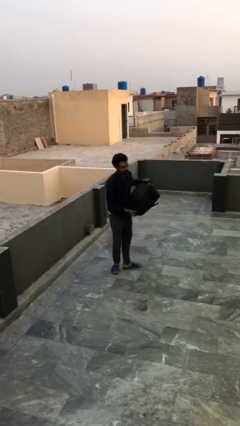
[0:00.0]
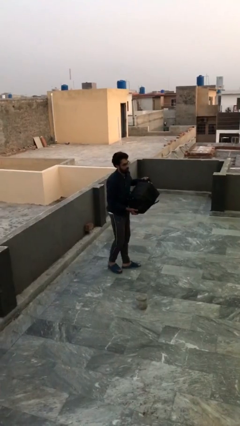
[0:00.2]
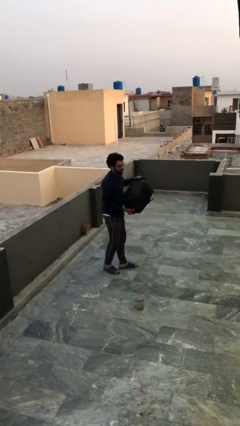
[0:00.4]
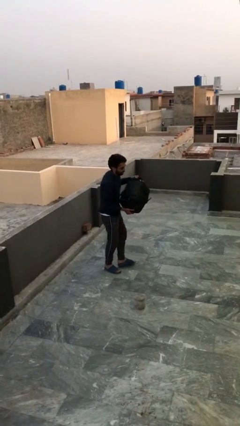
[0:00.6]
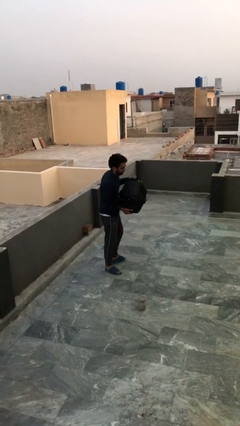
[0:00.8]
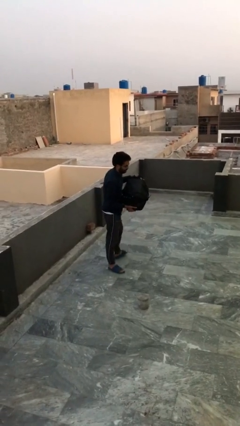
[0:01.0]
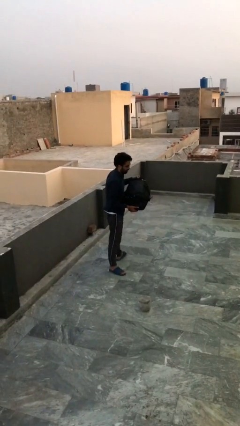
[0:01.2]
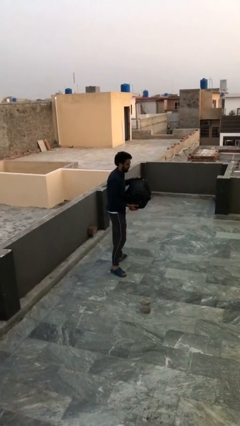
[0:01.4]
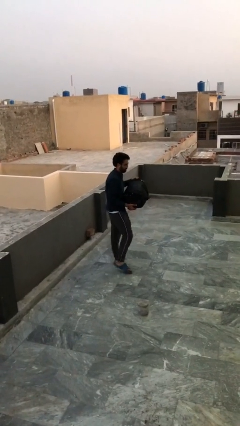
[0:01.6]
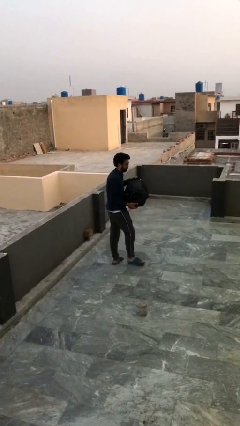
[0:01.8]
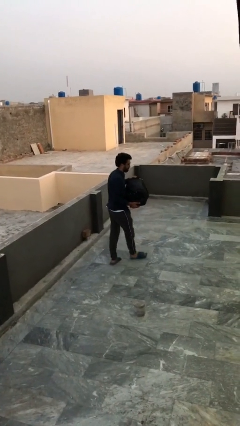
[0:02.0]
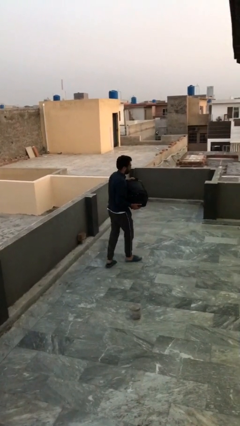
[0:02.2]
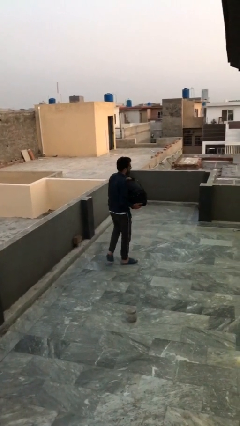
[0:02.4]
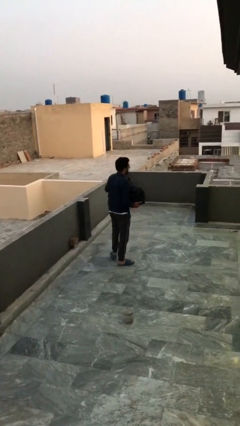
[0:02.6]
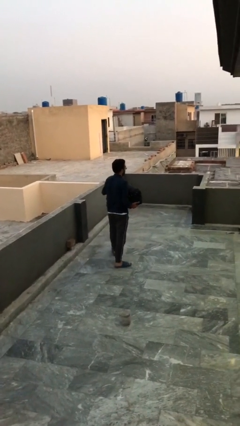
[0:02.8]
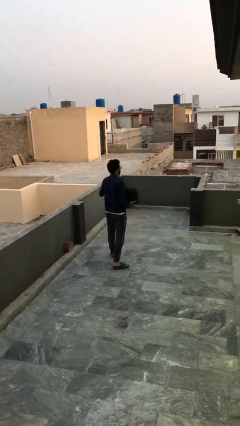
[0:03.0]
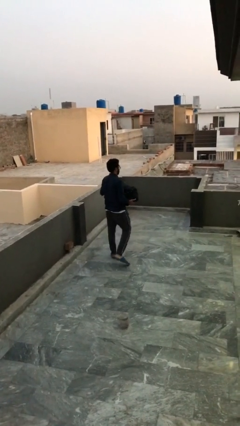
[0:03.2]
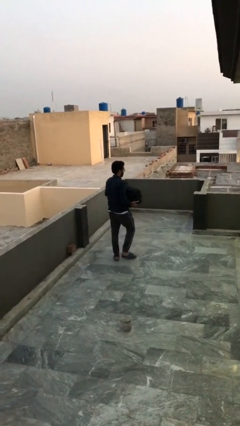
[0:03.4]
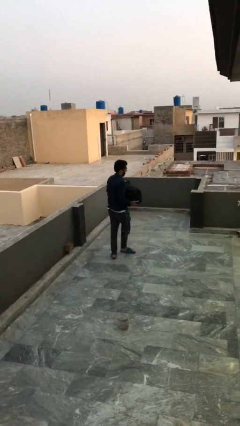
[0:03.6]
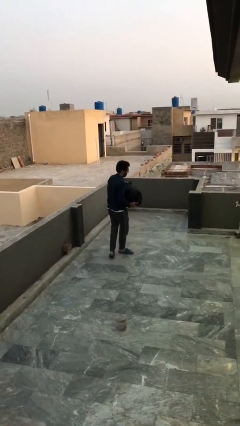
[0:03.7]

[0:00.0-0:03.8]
person carries heavy object

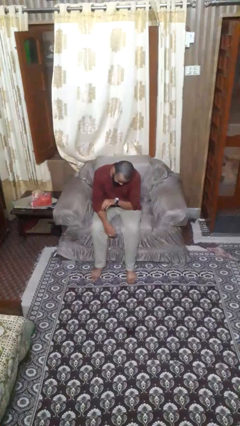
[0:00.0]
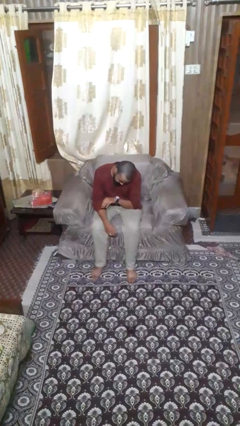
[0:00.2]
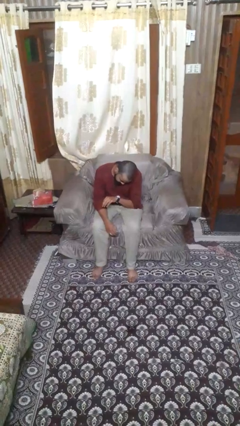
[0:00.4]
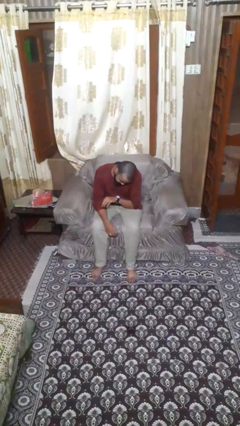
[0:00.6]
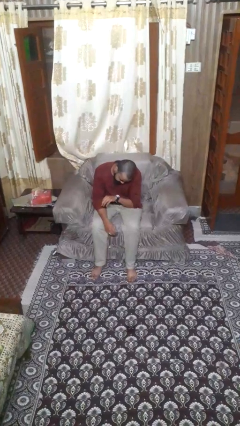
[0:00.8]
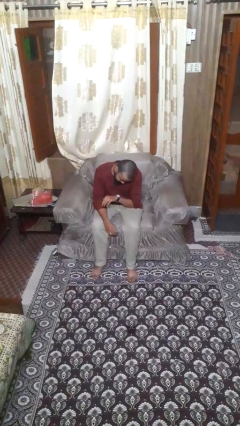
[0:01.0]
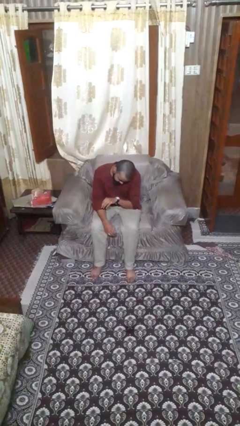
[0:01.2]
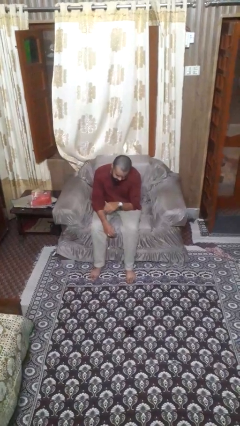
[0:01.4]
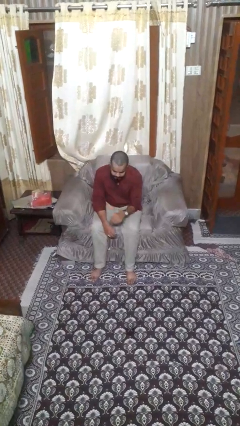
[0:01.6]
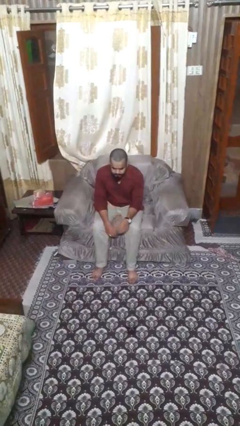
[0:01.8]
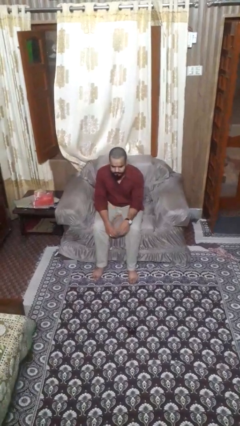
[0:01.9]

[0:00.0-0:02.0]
person looks at wristwatch

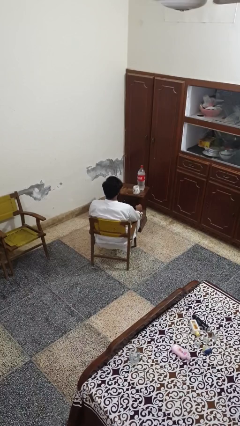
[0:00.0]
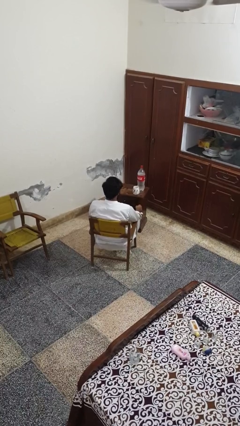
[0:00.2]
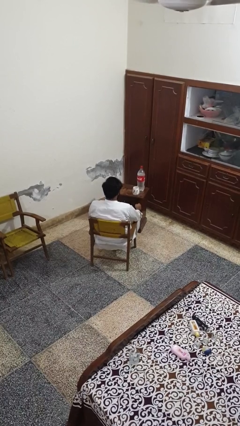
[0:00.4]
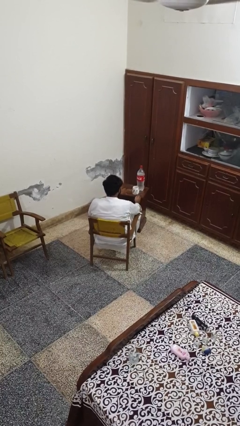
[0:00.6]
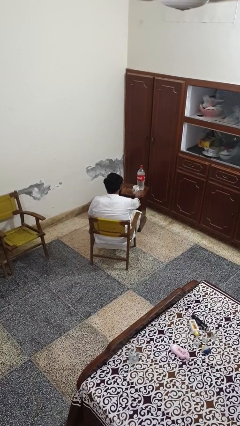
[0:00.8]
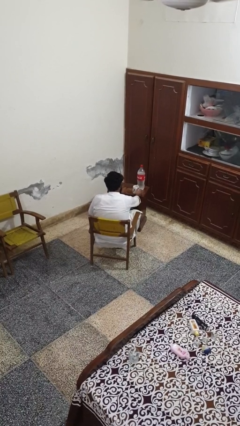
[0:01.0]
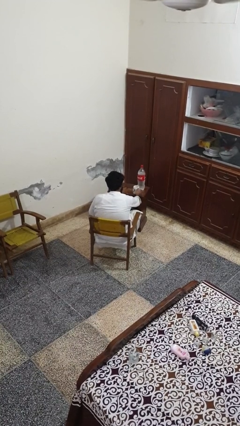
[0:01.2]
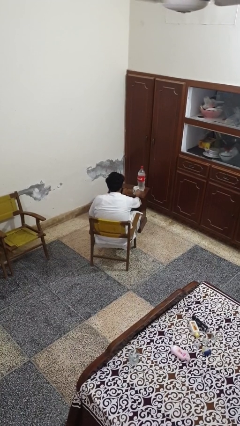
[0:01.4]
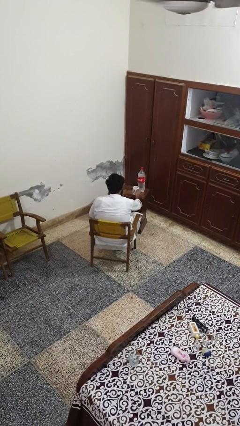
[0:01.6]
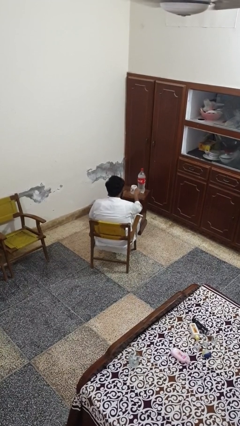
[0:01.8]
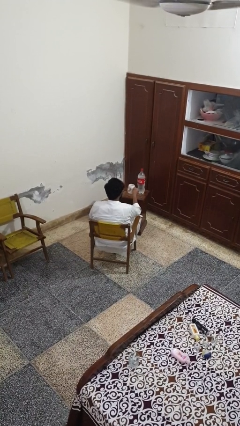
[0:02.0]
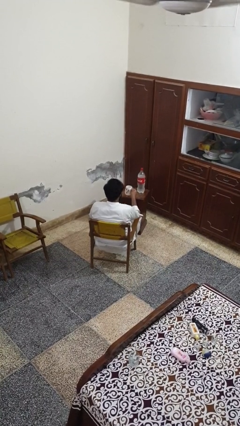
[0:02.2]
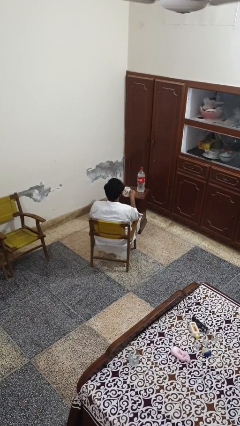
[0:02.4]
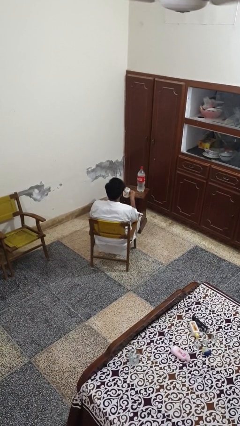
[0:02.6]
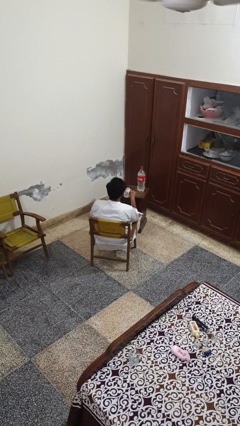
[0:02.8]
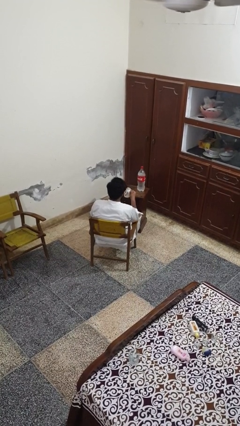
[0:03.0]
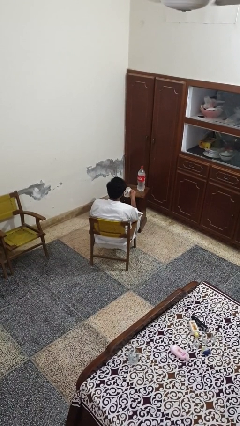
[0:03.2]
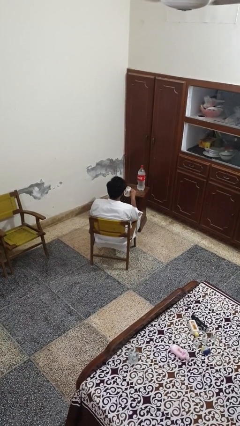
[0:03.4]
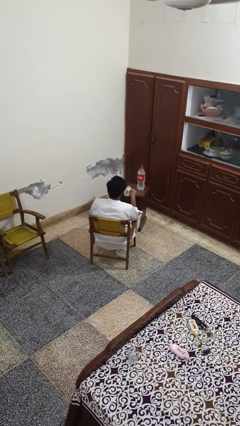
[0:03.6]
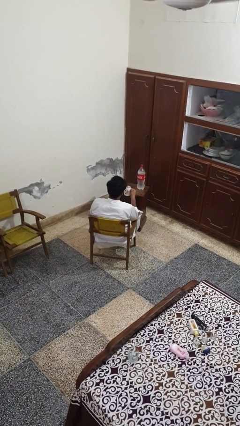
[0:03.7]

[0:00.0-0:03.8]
person picks up object from table

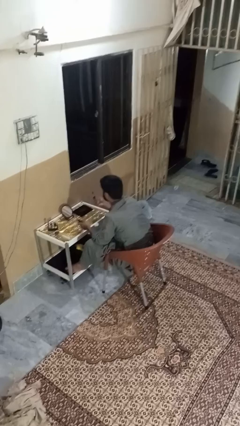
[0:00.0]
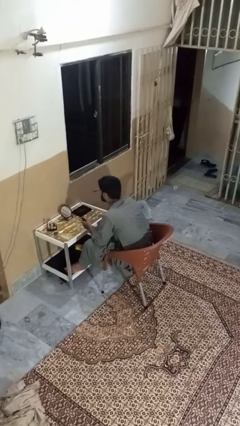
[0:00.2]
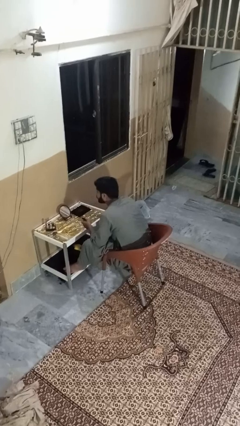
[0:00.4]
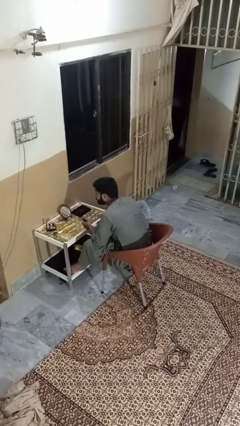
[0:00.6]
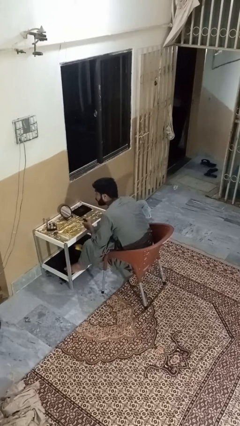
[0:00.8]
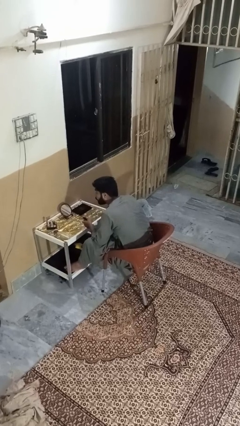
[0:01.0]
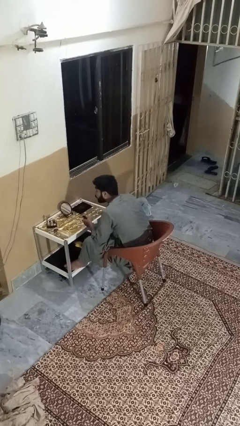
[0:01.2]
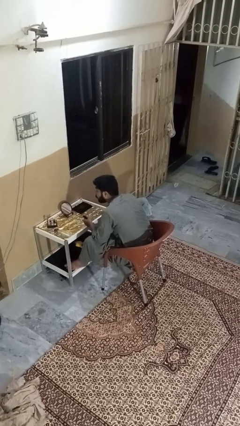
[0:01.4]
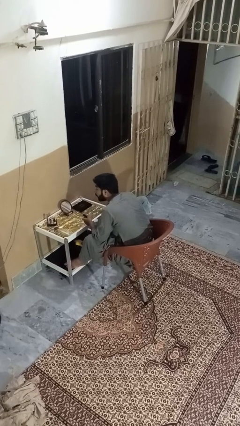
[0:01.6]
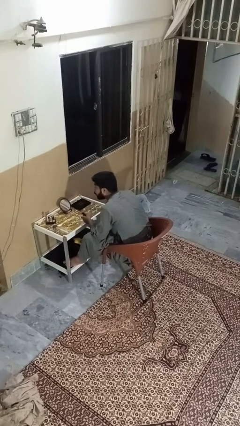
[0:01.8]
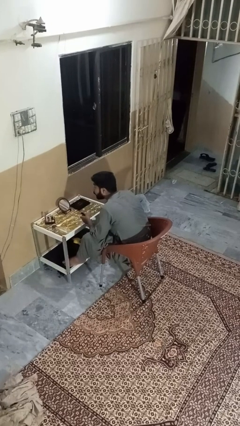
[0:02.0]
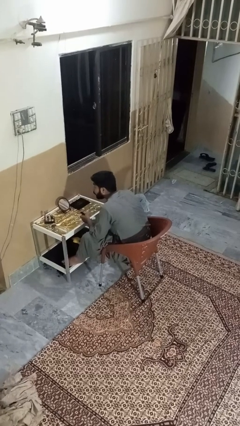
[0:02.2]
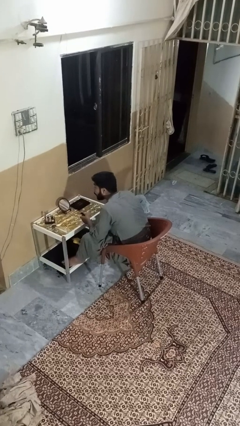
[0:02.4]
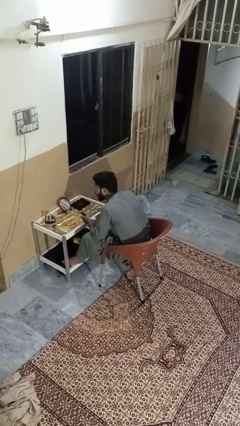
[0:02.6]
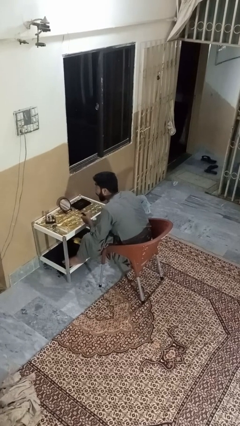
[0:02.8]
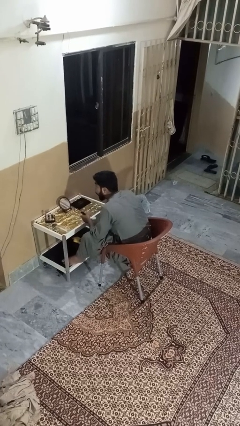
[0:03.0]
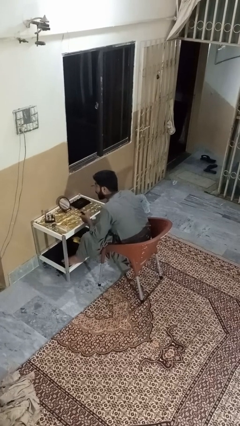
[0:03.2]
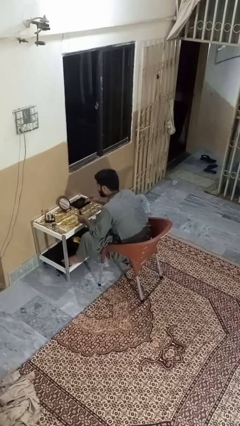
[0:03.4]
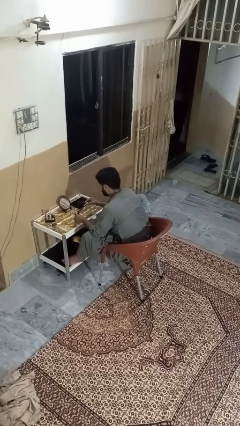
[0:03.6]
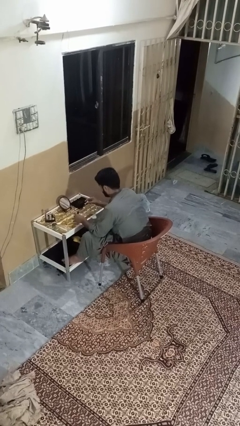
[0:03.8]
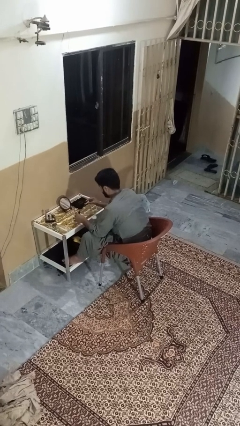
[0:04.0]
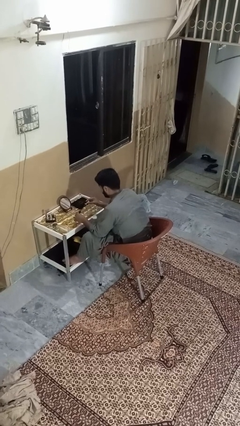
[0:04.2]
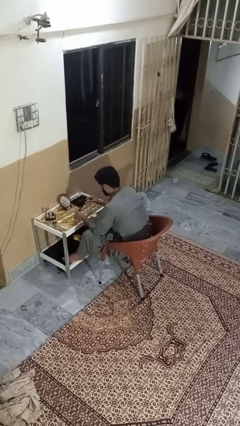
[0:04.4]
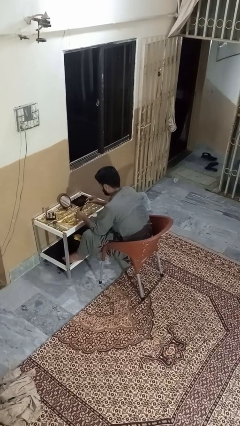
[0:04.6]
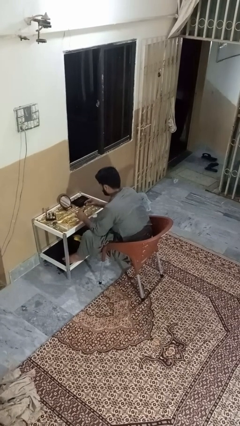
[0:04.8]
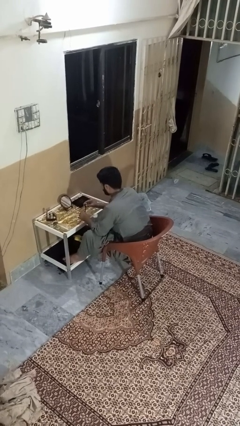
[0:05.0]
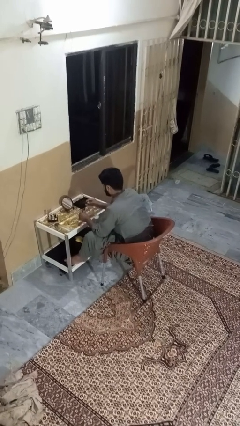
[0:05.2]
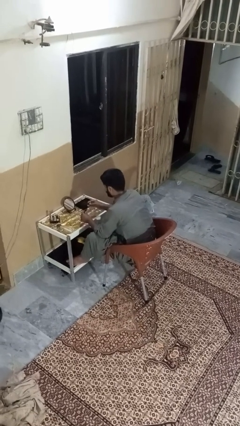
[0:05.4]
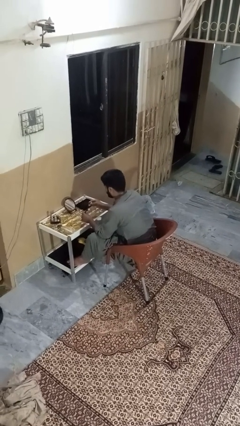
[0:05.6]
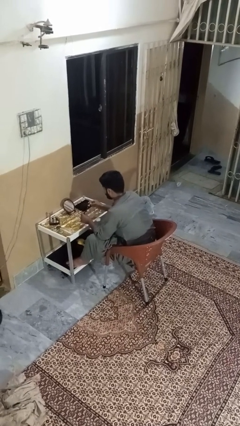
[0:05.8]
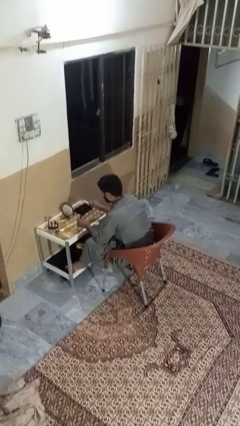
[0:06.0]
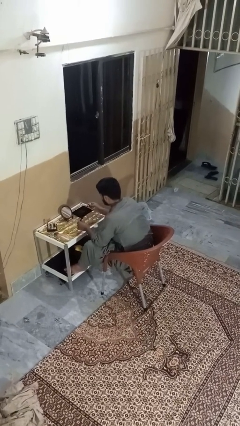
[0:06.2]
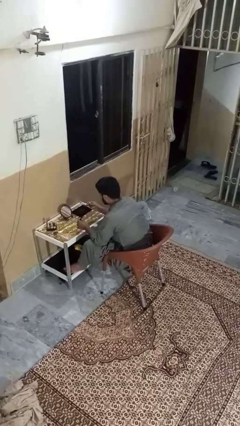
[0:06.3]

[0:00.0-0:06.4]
person applies eye makeup

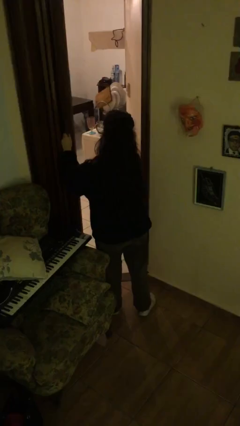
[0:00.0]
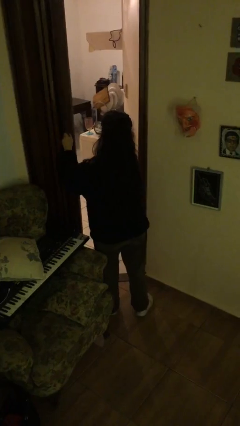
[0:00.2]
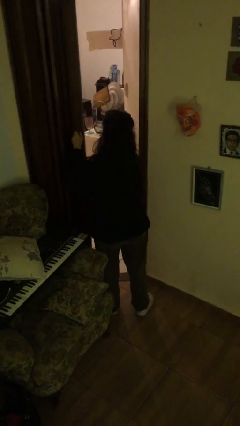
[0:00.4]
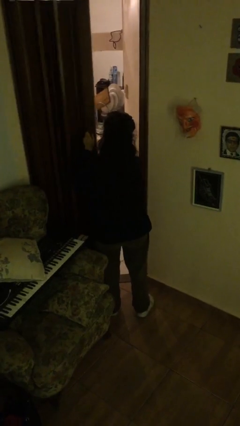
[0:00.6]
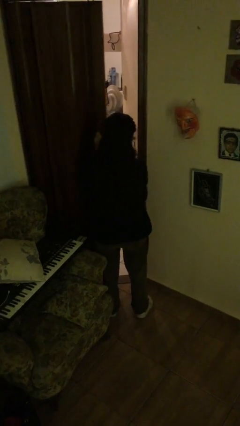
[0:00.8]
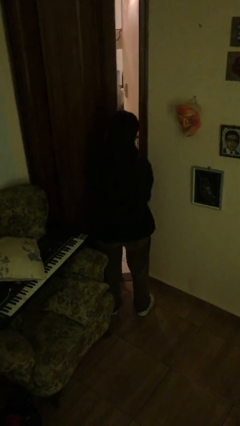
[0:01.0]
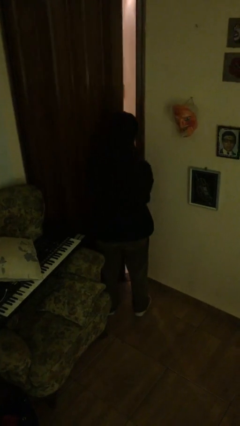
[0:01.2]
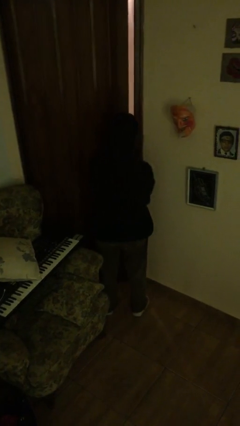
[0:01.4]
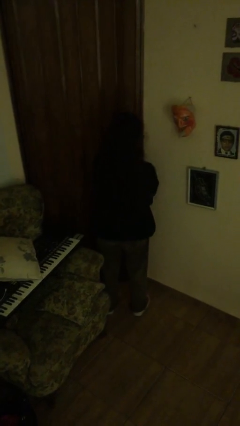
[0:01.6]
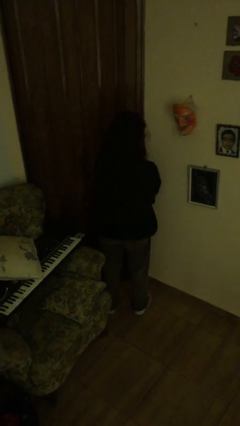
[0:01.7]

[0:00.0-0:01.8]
person closes sliding door
